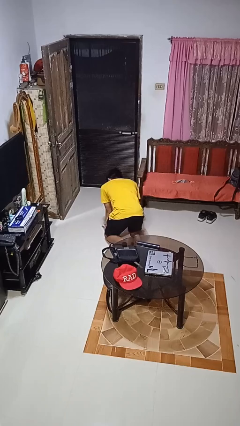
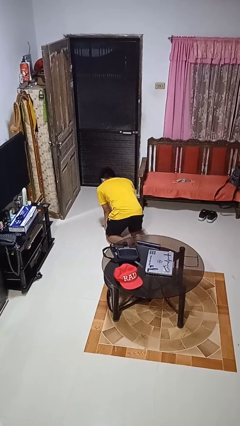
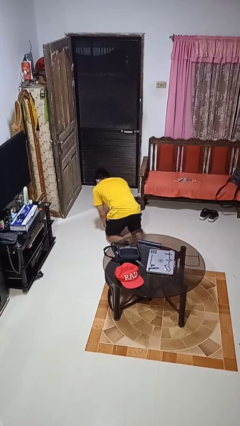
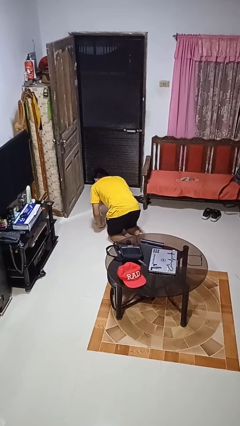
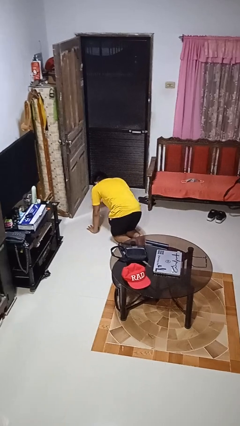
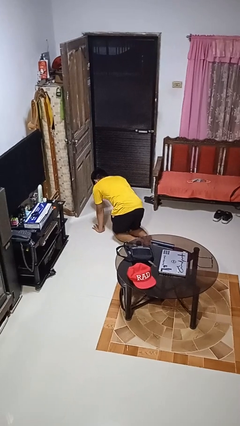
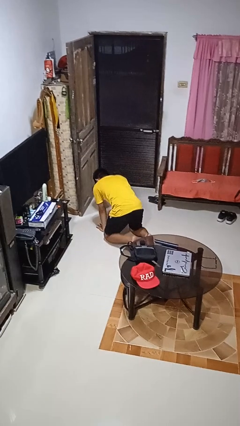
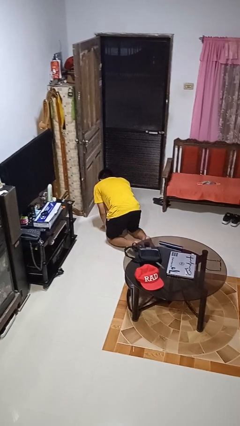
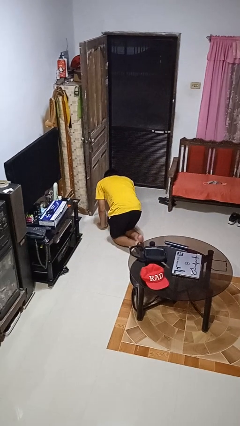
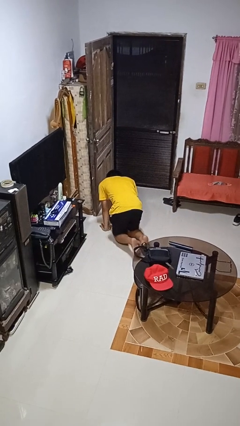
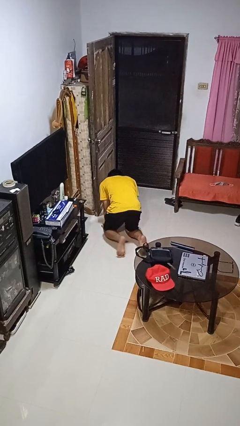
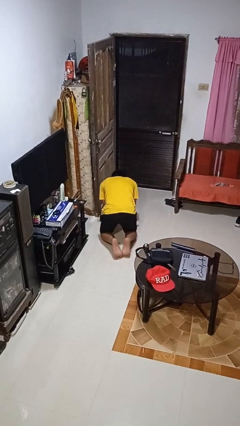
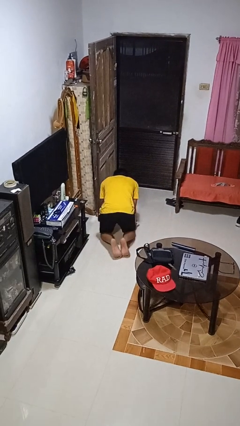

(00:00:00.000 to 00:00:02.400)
person crawls

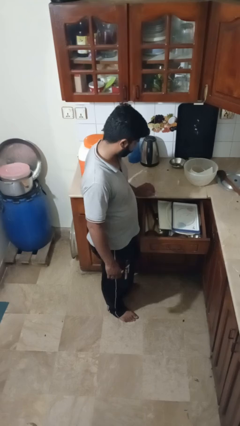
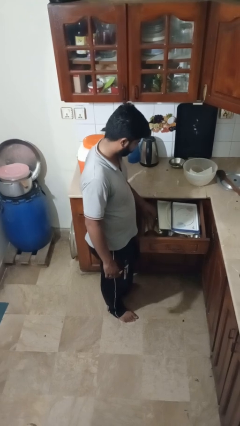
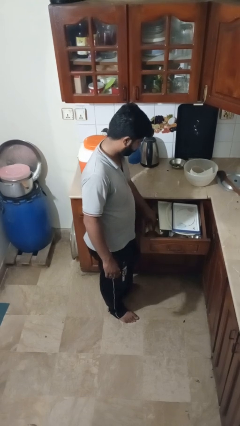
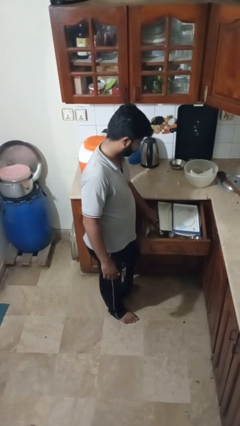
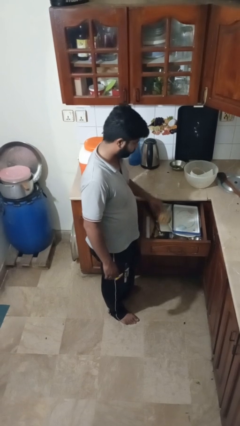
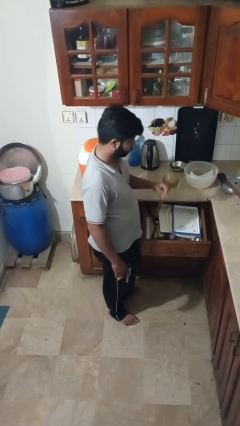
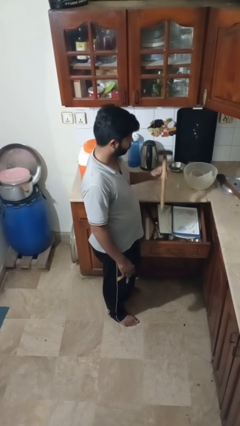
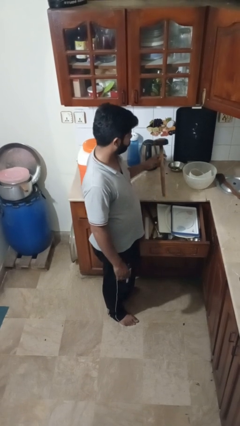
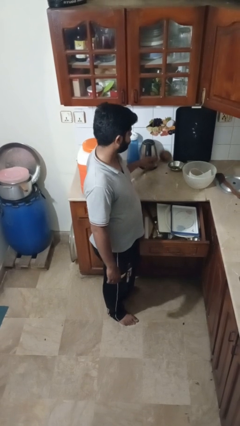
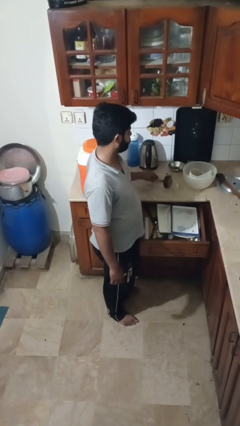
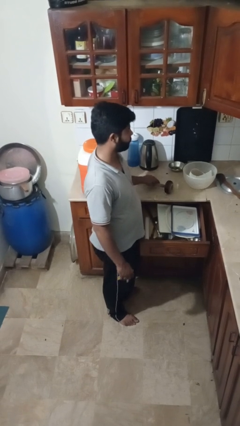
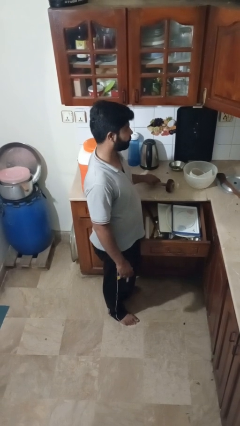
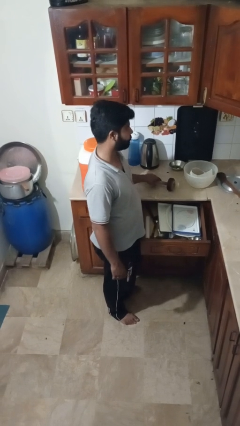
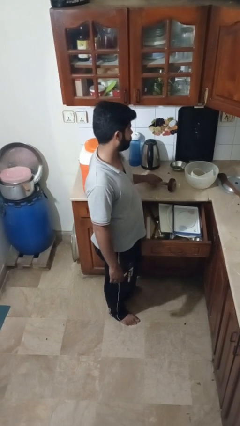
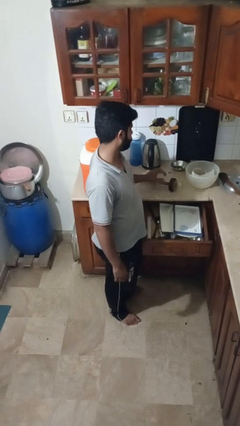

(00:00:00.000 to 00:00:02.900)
person takes object from kitchen drawer

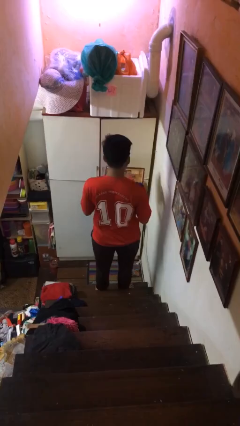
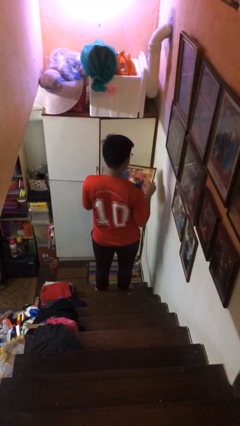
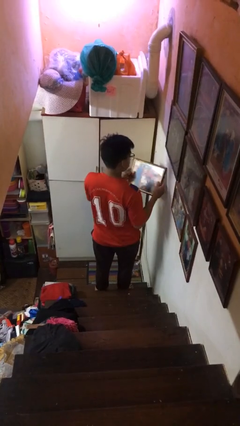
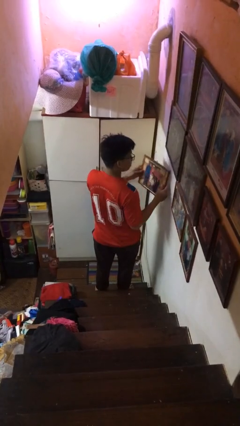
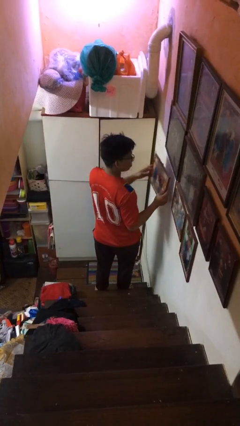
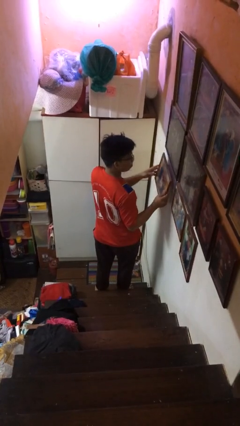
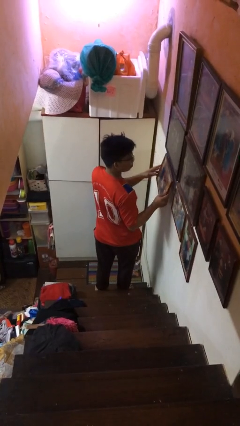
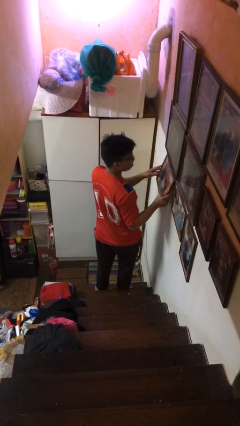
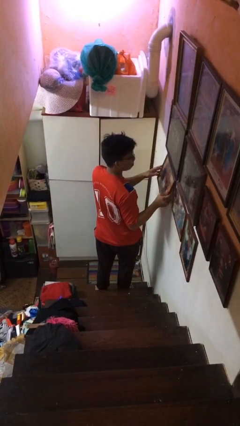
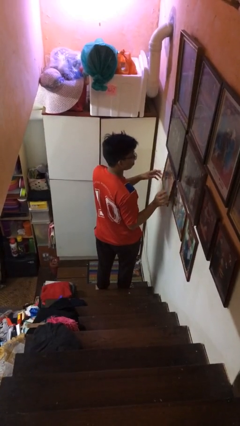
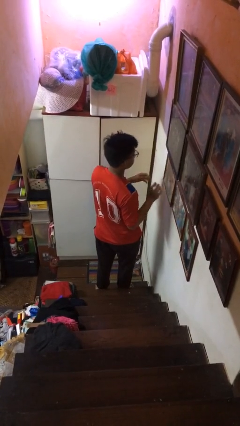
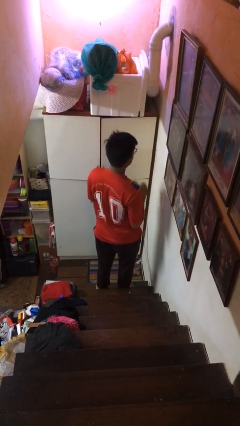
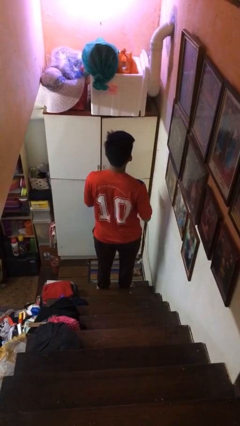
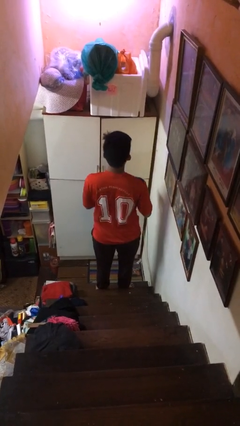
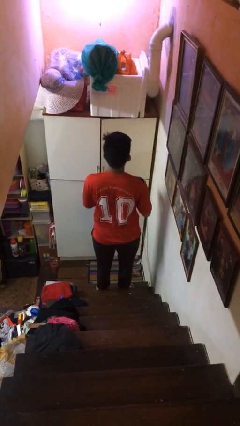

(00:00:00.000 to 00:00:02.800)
person puts up picture frame

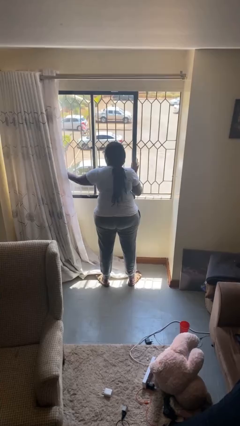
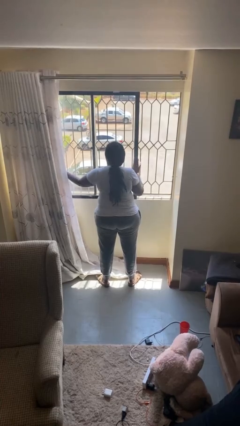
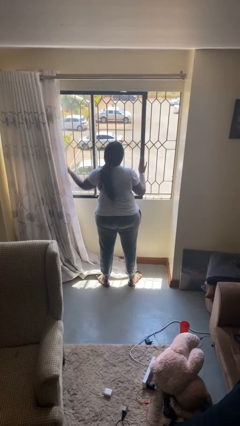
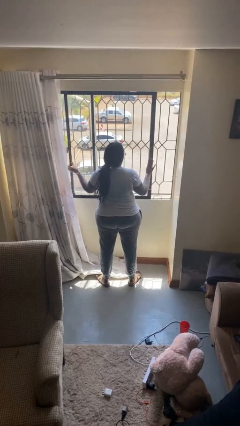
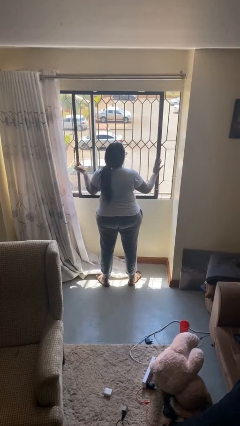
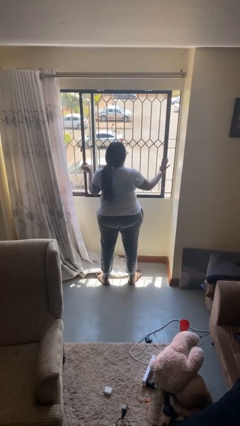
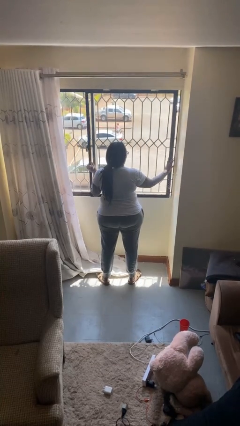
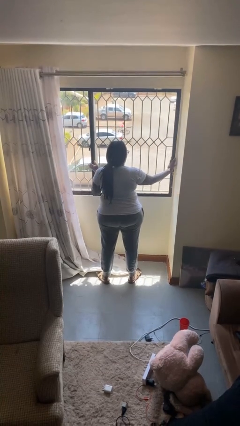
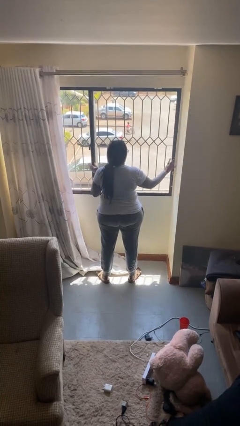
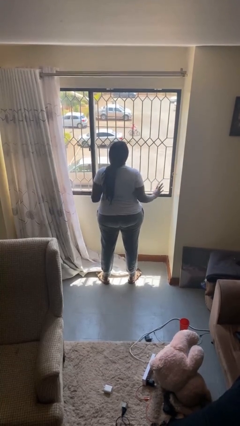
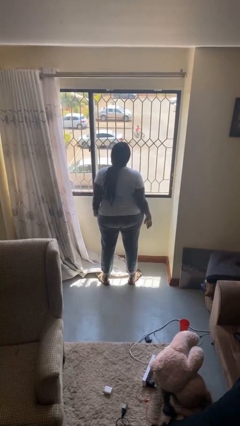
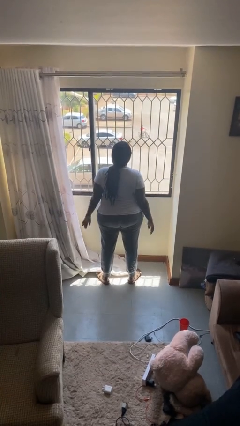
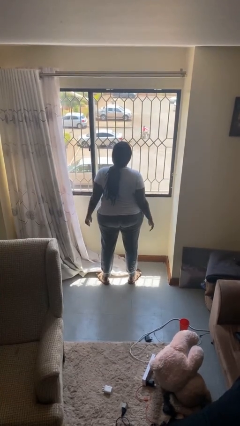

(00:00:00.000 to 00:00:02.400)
person closes home window

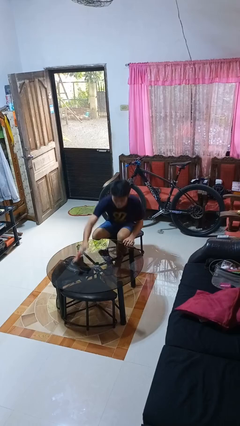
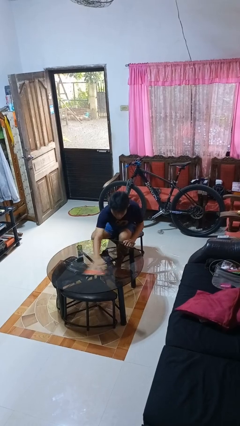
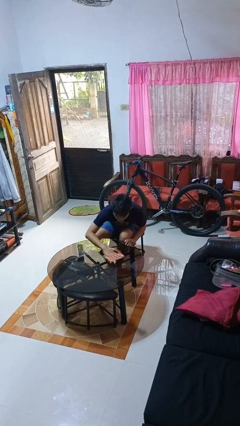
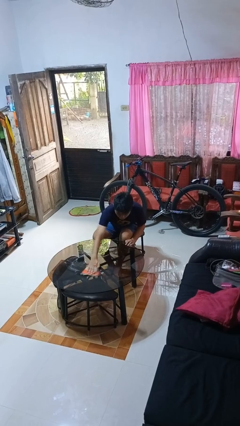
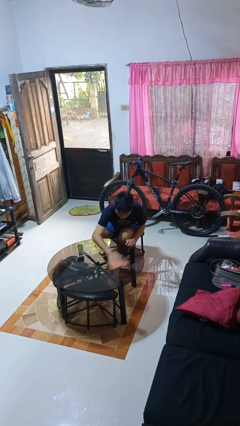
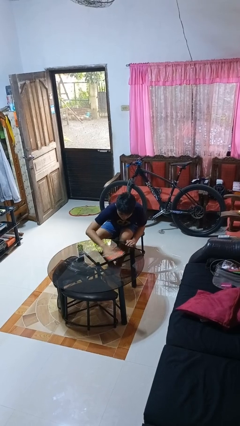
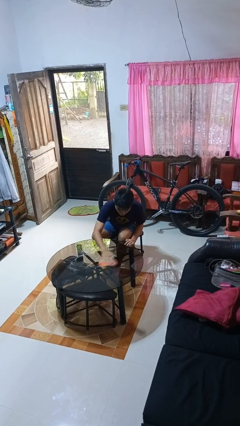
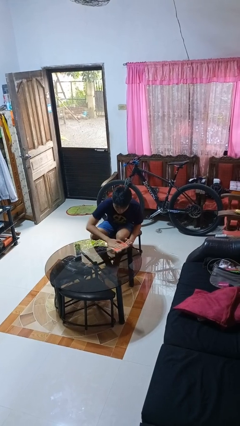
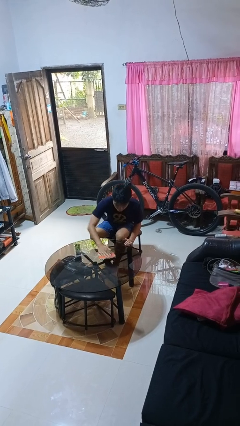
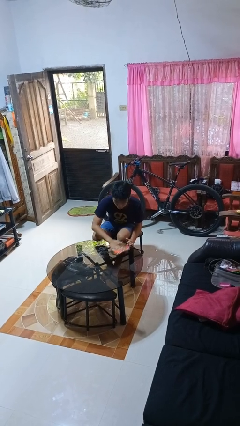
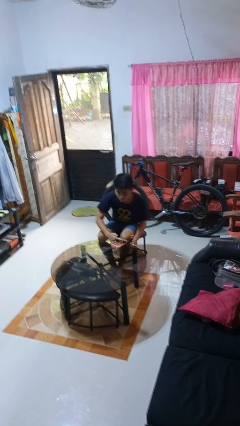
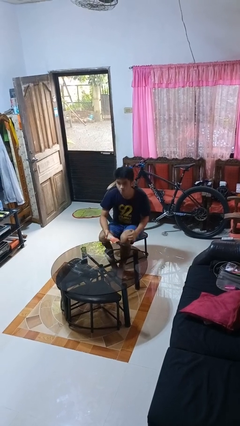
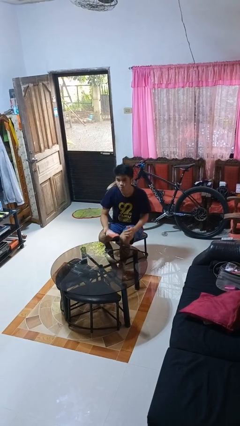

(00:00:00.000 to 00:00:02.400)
person cleans table with rag

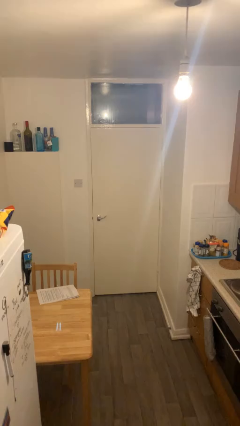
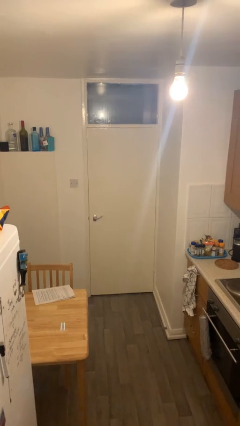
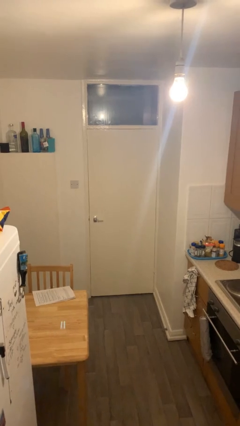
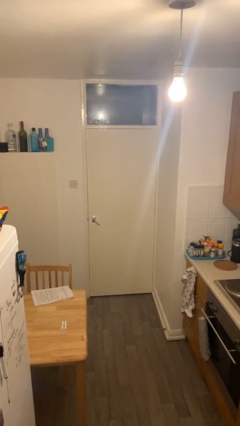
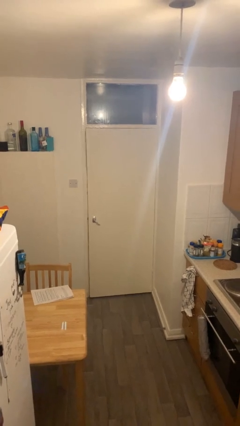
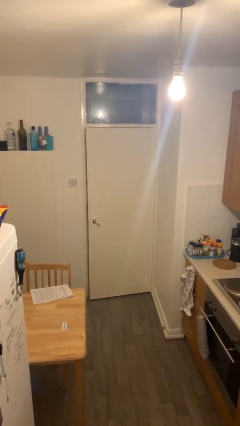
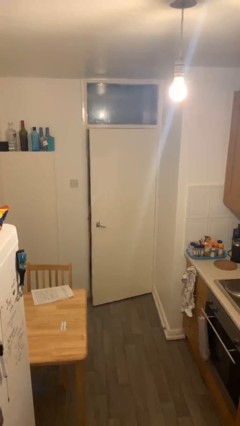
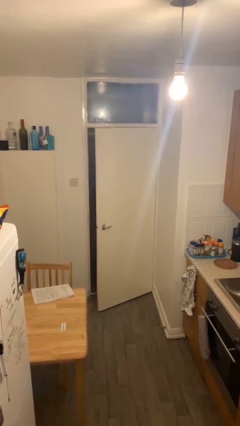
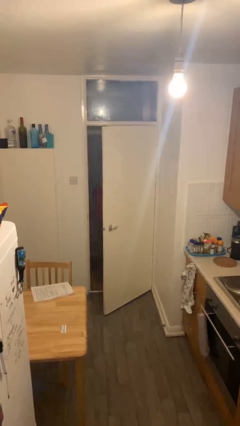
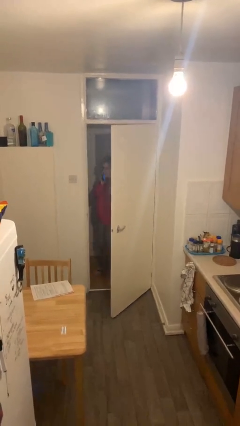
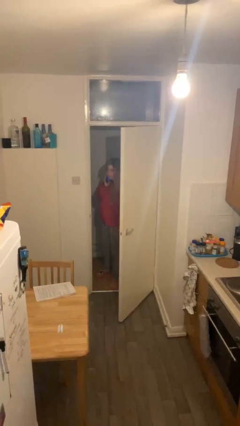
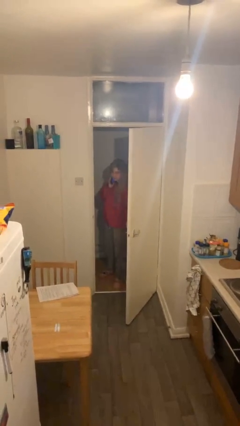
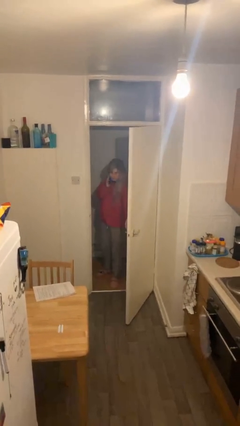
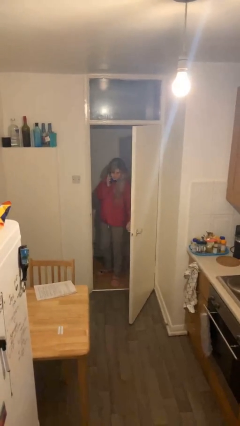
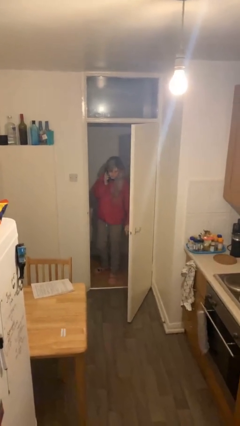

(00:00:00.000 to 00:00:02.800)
person opens facility door

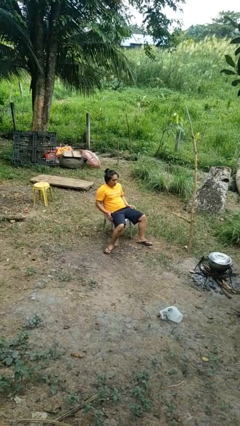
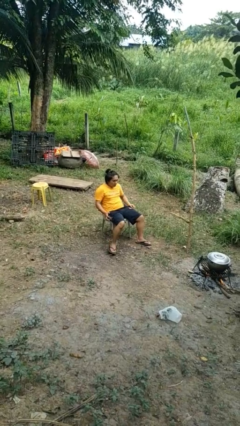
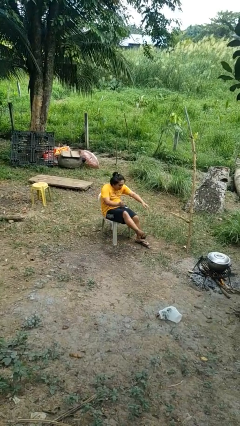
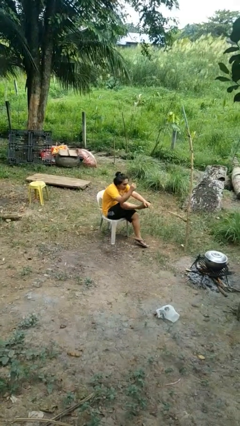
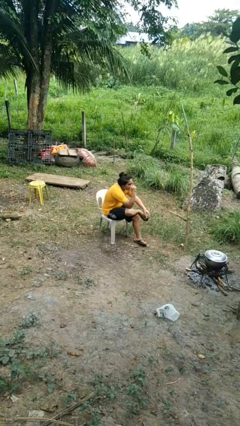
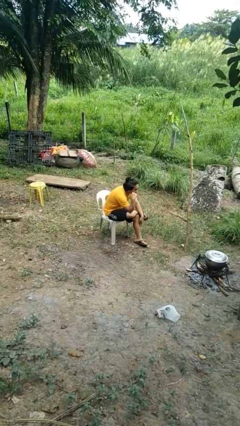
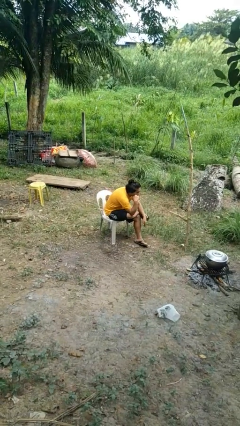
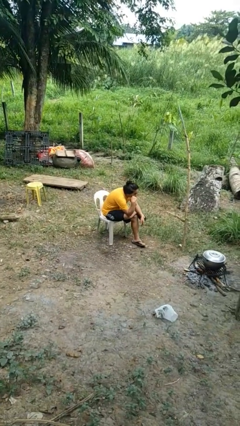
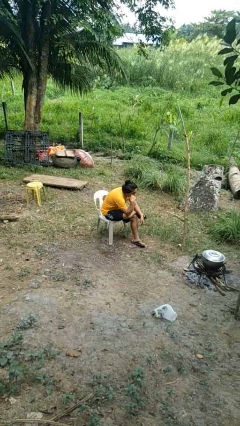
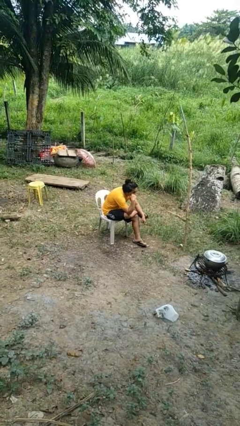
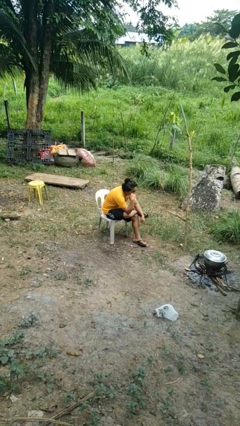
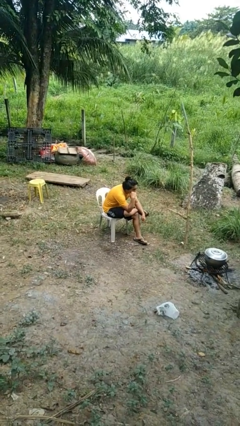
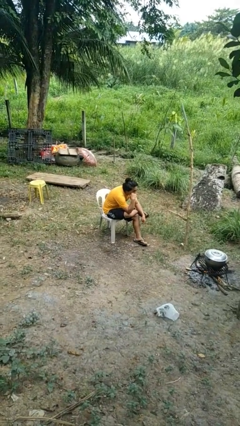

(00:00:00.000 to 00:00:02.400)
person crosses legs
